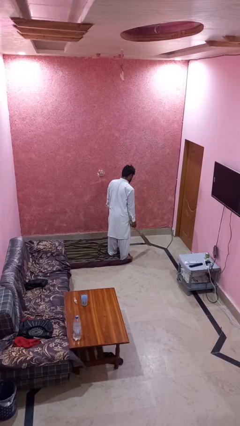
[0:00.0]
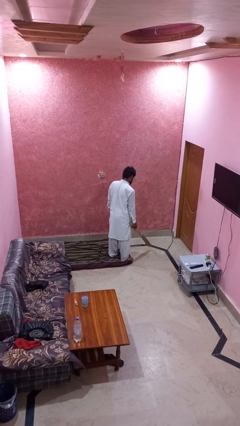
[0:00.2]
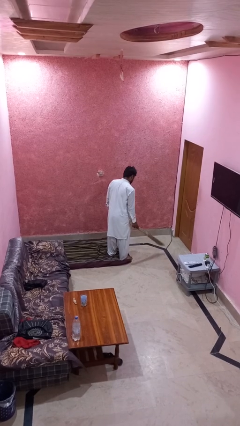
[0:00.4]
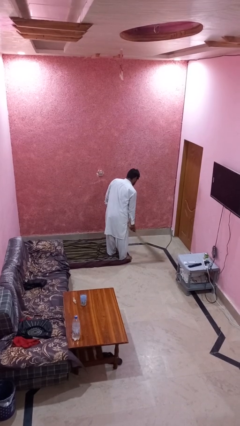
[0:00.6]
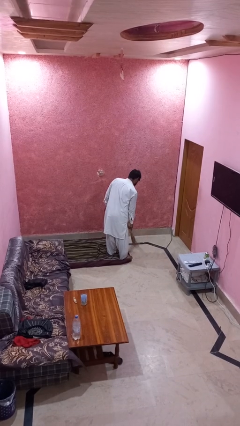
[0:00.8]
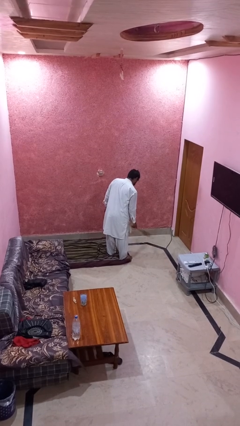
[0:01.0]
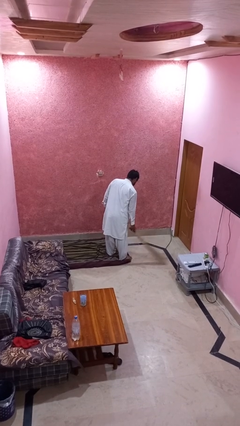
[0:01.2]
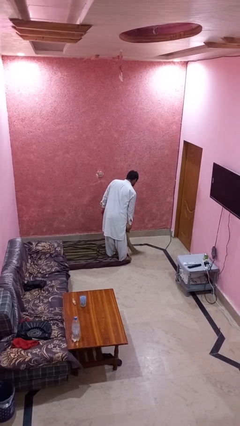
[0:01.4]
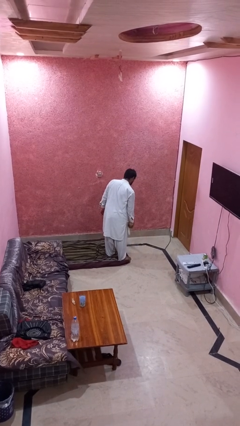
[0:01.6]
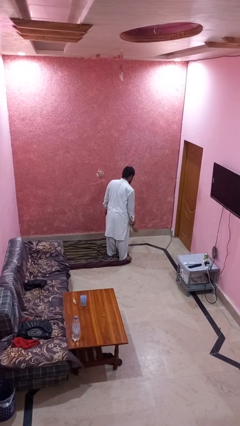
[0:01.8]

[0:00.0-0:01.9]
person sweeps floor

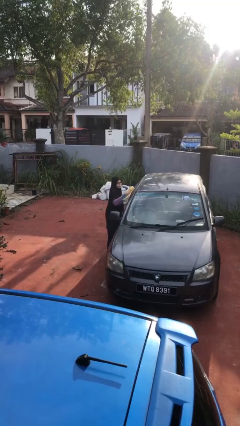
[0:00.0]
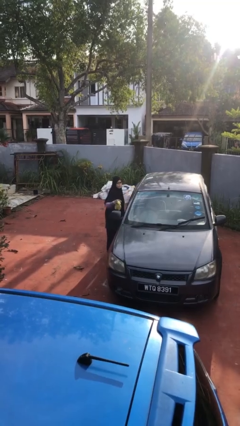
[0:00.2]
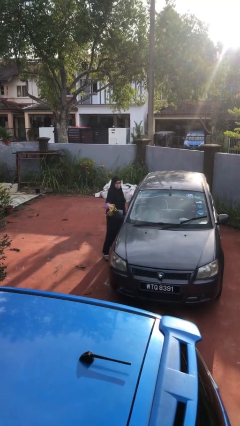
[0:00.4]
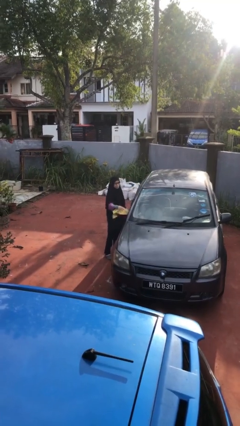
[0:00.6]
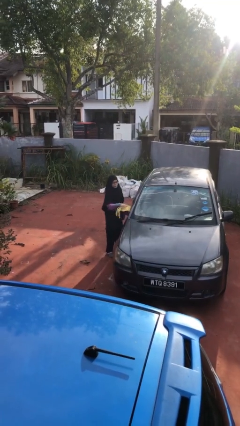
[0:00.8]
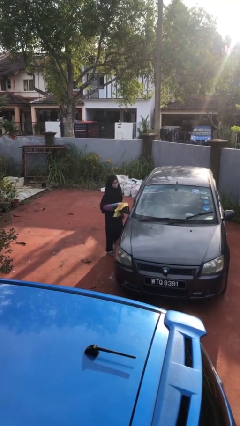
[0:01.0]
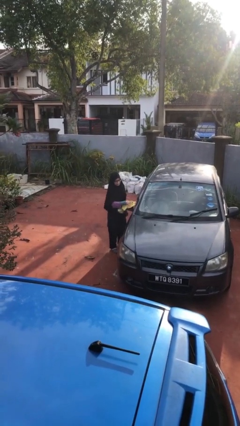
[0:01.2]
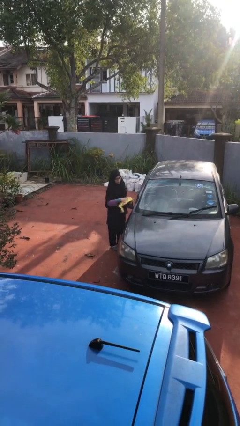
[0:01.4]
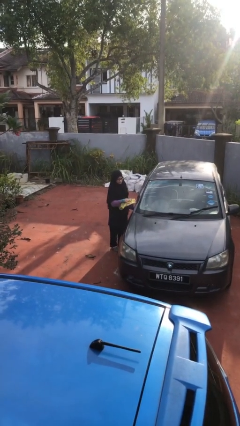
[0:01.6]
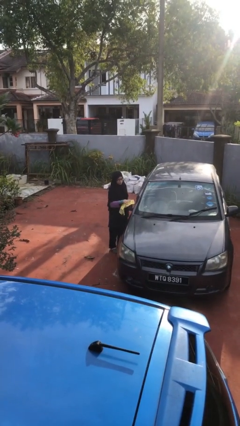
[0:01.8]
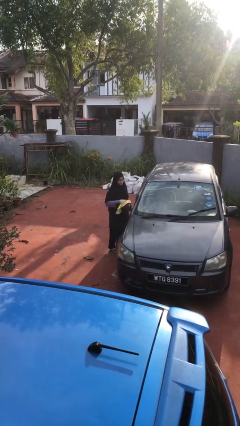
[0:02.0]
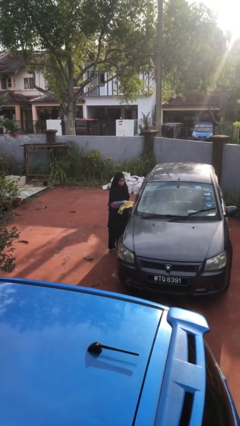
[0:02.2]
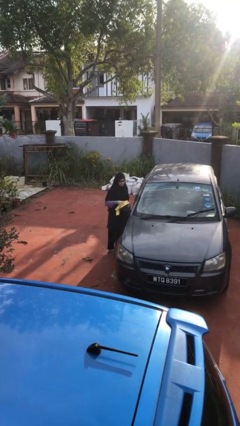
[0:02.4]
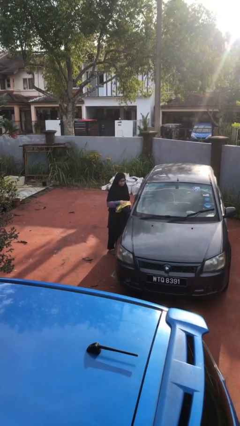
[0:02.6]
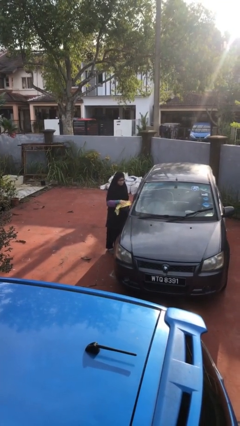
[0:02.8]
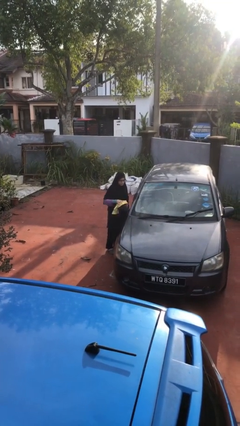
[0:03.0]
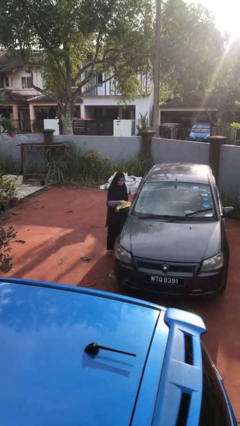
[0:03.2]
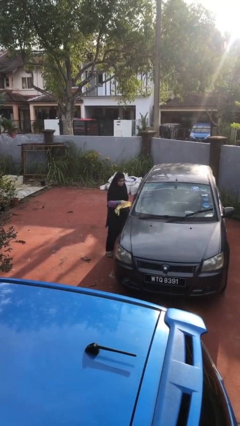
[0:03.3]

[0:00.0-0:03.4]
person polishes car with rag

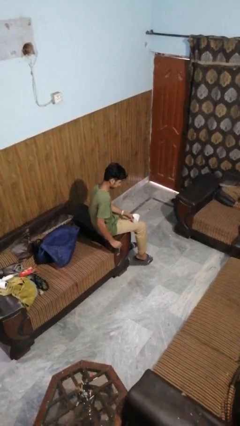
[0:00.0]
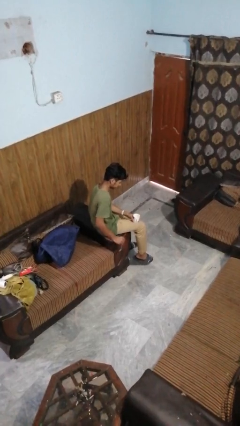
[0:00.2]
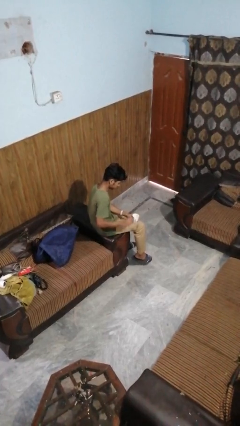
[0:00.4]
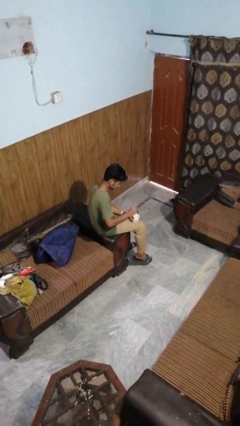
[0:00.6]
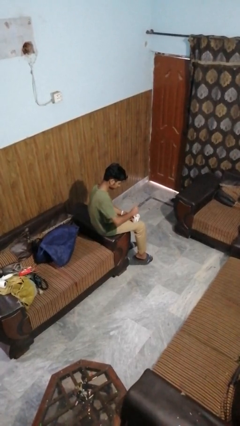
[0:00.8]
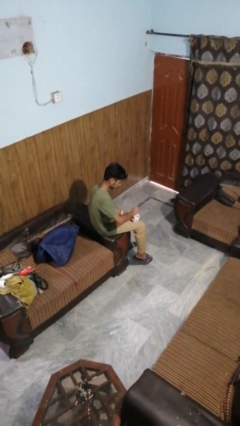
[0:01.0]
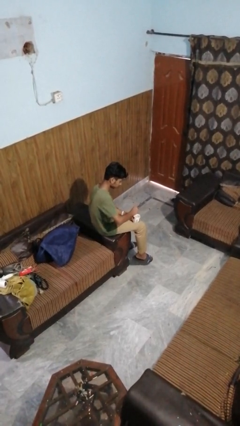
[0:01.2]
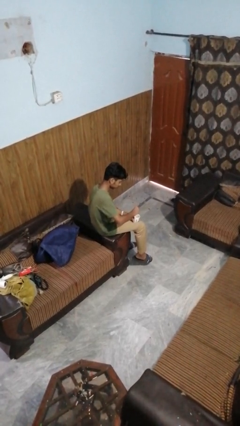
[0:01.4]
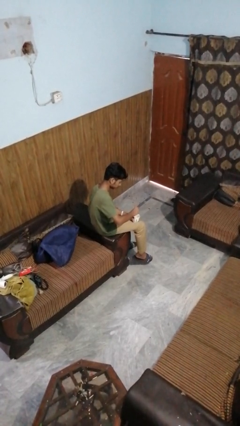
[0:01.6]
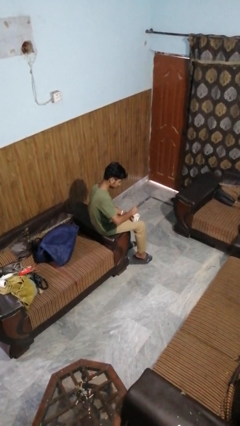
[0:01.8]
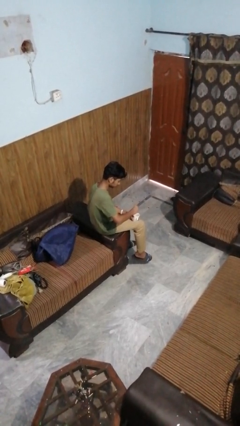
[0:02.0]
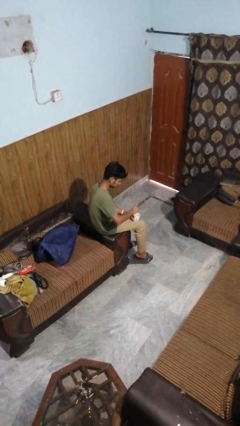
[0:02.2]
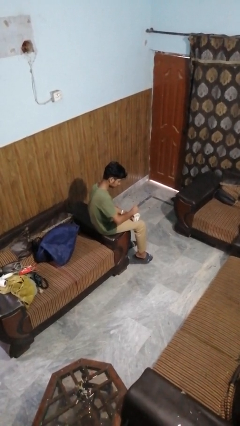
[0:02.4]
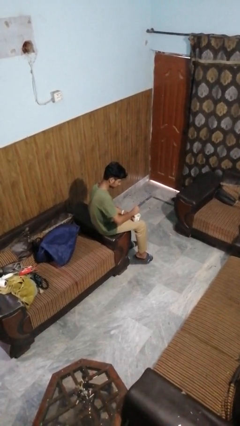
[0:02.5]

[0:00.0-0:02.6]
person stirs mug

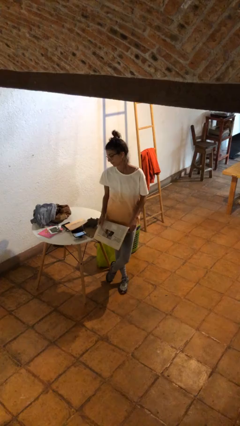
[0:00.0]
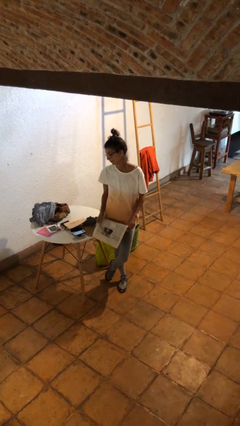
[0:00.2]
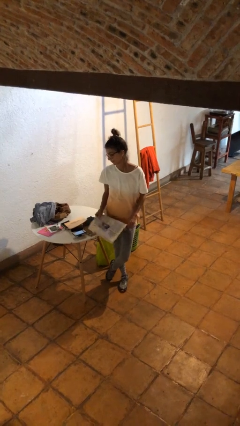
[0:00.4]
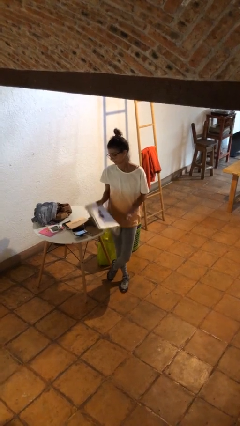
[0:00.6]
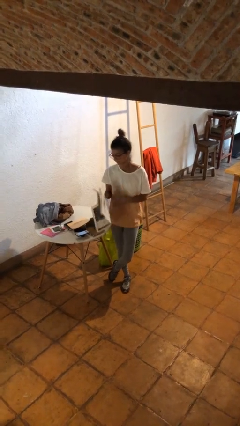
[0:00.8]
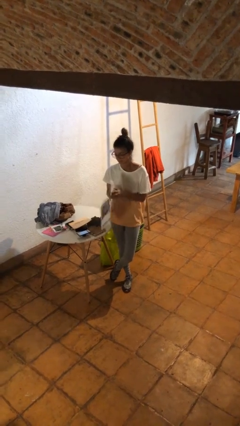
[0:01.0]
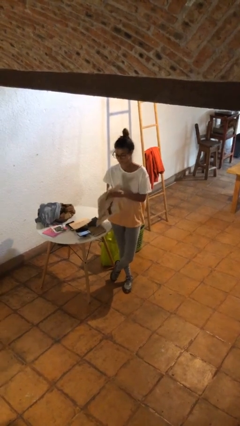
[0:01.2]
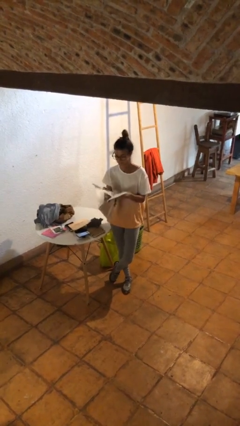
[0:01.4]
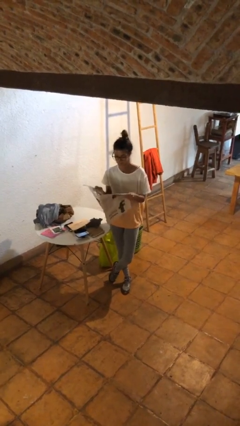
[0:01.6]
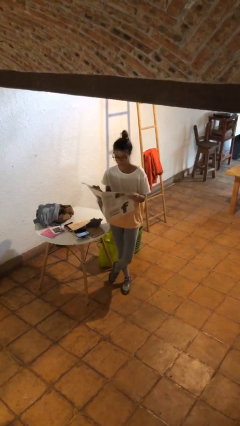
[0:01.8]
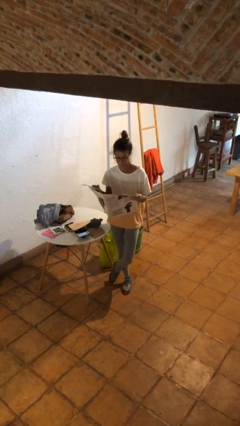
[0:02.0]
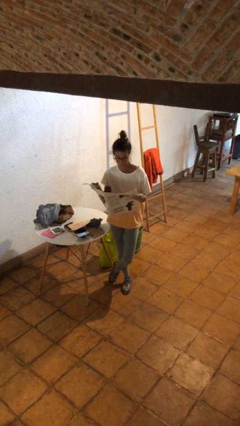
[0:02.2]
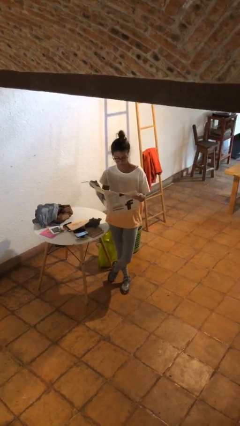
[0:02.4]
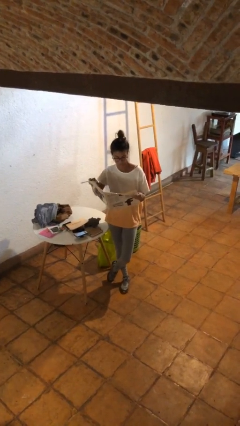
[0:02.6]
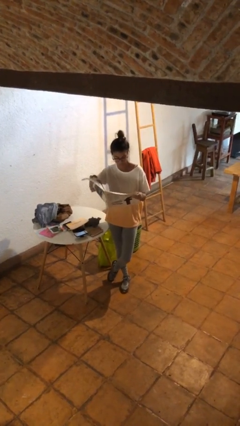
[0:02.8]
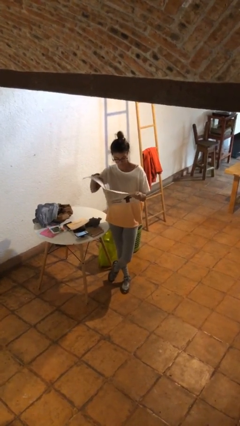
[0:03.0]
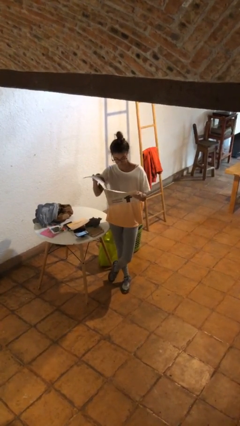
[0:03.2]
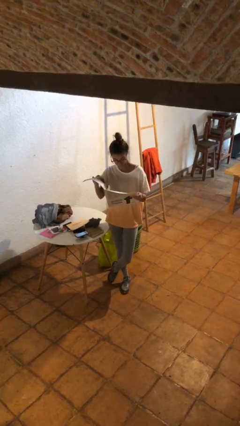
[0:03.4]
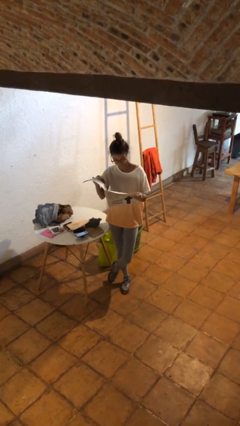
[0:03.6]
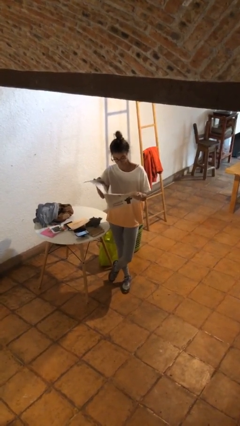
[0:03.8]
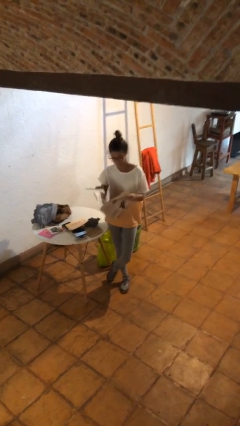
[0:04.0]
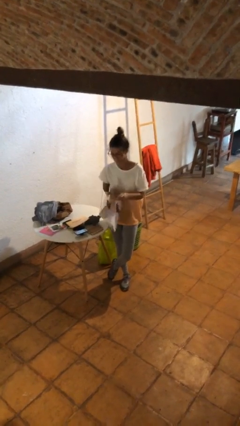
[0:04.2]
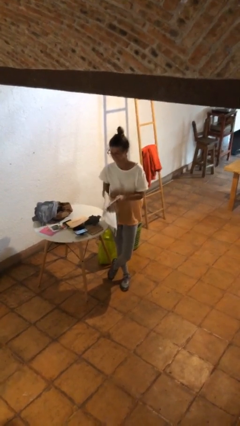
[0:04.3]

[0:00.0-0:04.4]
person reads newspaper

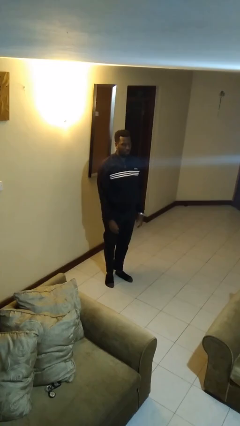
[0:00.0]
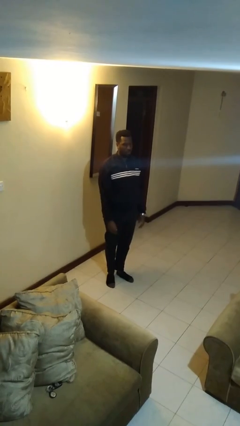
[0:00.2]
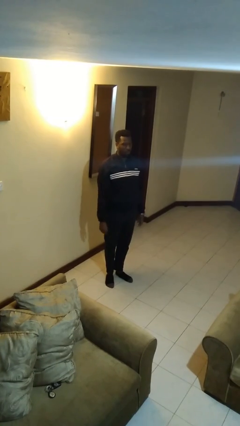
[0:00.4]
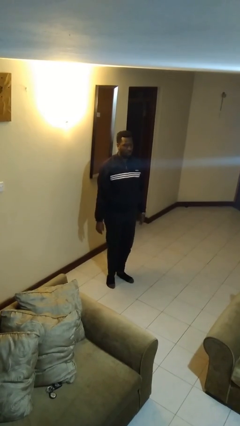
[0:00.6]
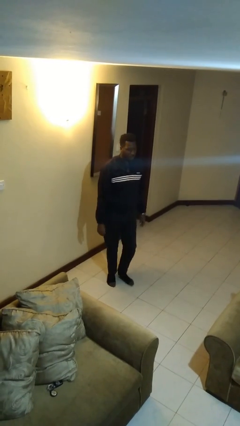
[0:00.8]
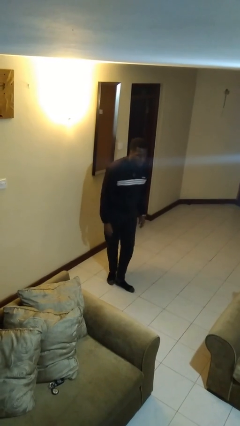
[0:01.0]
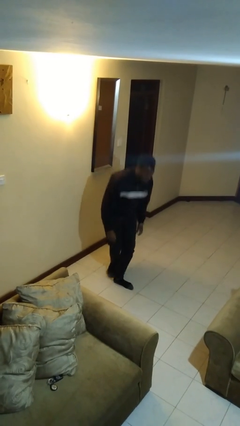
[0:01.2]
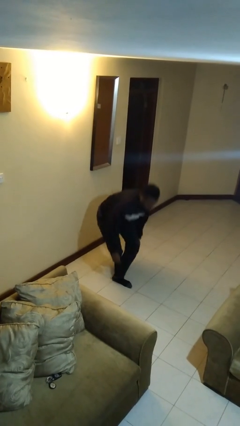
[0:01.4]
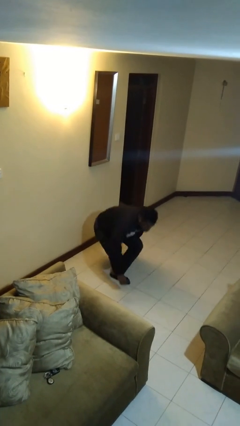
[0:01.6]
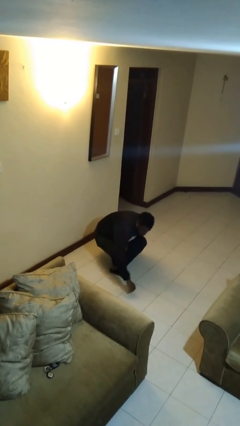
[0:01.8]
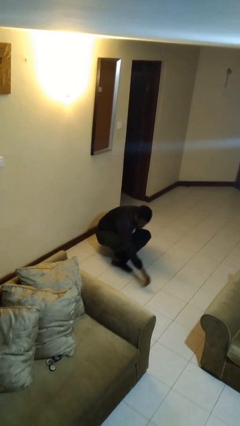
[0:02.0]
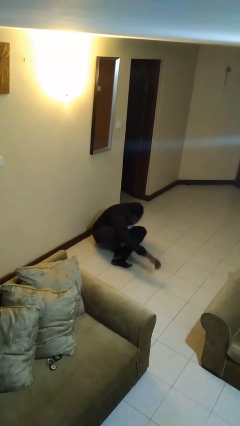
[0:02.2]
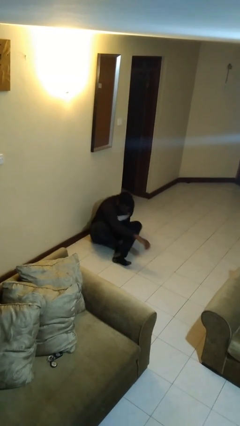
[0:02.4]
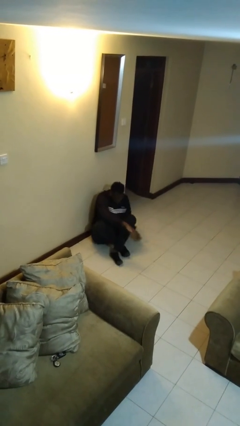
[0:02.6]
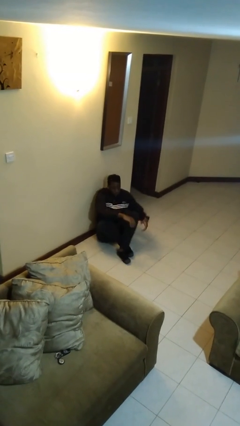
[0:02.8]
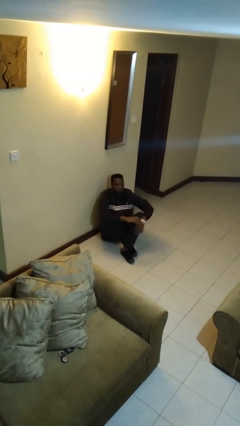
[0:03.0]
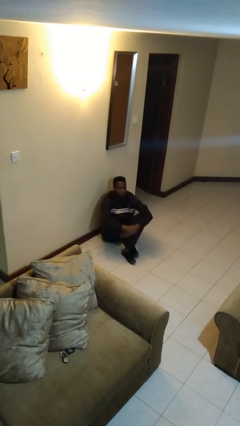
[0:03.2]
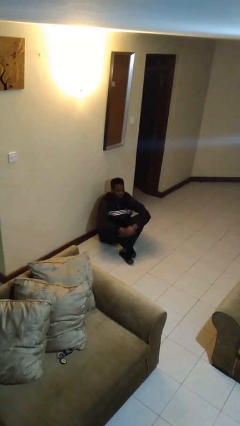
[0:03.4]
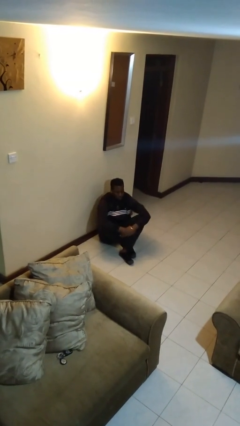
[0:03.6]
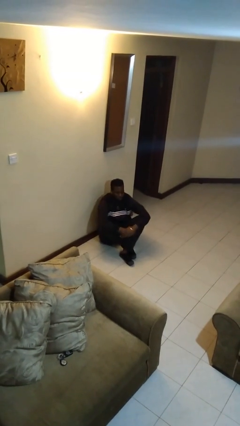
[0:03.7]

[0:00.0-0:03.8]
person sits crisscross

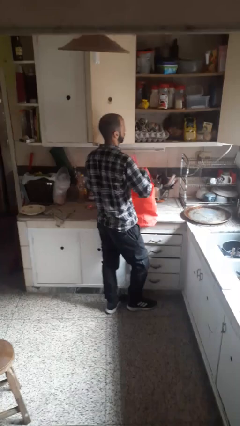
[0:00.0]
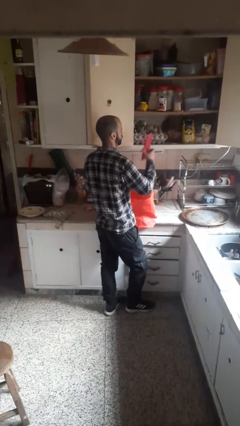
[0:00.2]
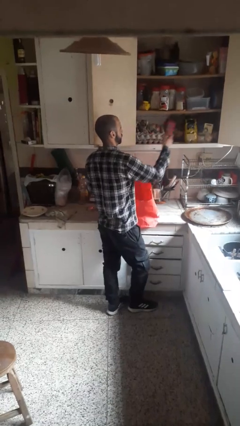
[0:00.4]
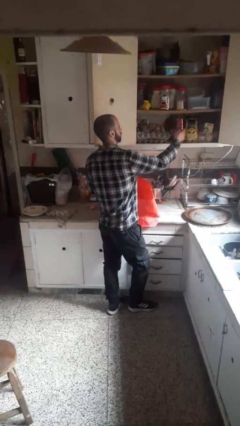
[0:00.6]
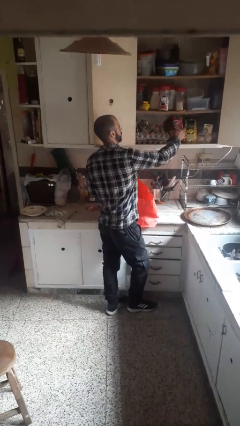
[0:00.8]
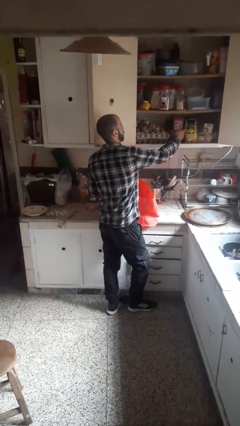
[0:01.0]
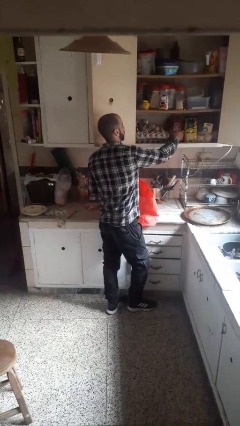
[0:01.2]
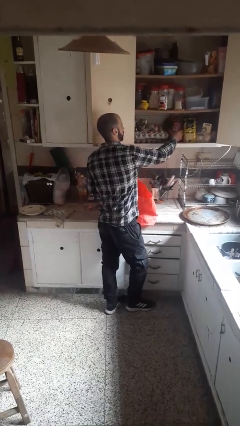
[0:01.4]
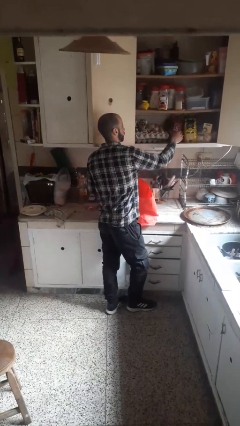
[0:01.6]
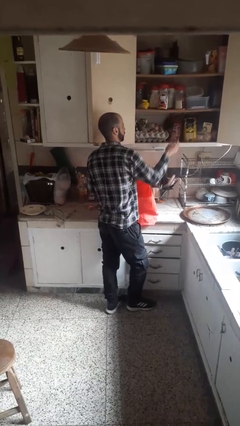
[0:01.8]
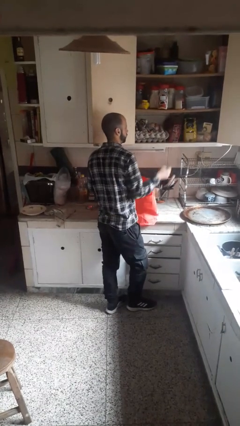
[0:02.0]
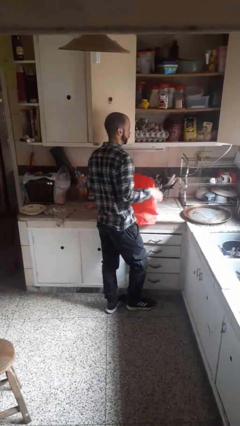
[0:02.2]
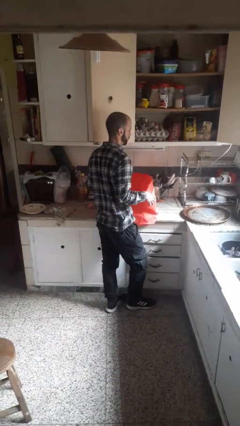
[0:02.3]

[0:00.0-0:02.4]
person loads groceries into cabinet
